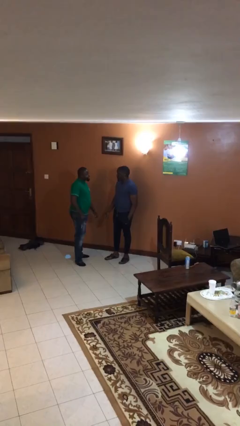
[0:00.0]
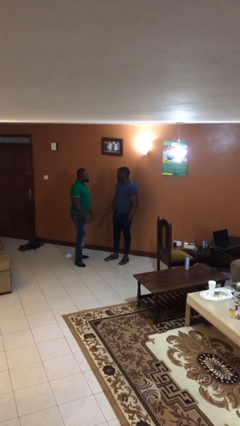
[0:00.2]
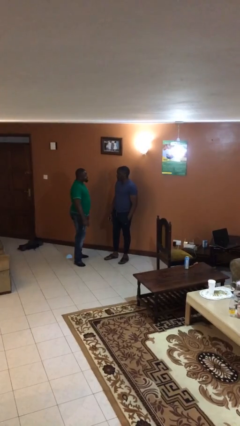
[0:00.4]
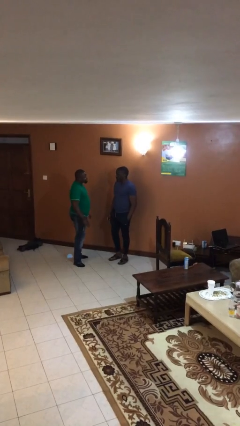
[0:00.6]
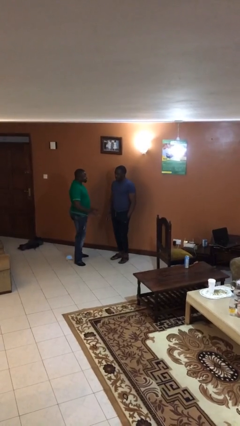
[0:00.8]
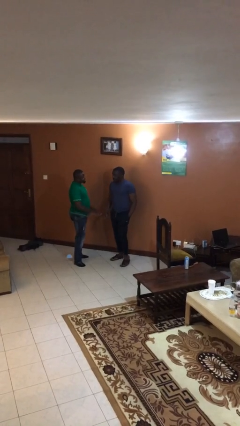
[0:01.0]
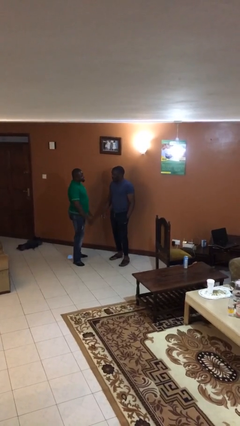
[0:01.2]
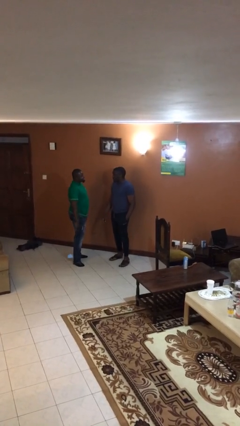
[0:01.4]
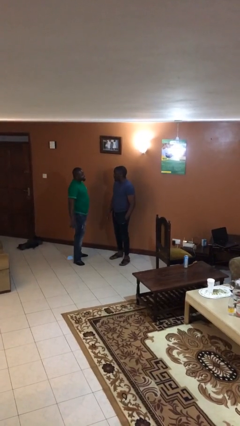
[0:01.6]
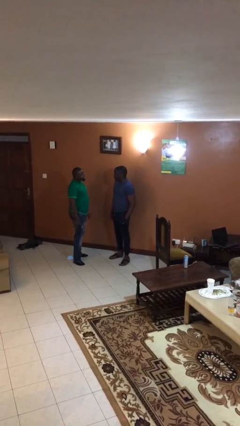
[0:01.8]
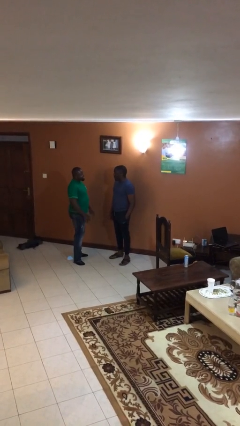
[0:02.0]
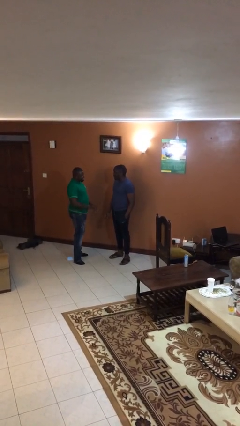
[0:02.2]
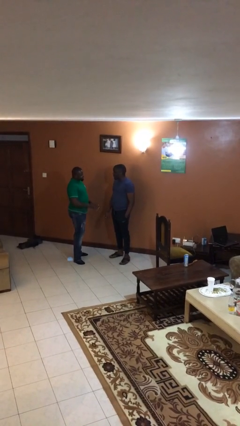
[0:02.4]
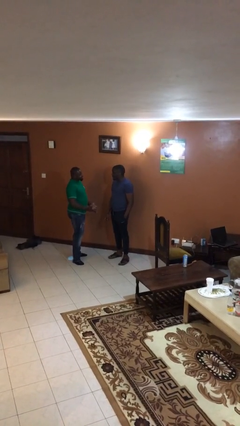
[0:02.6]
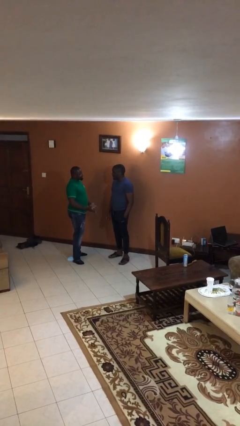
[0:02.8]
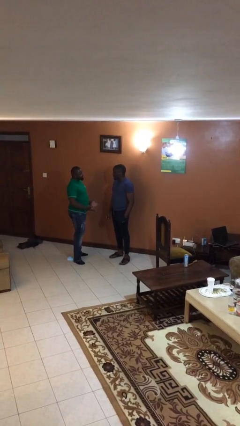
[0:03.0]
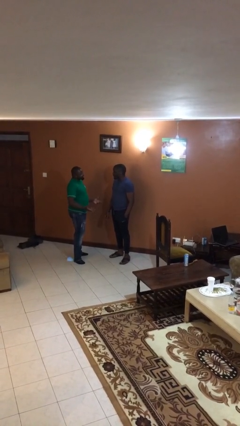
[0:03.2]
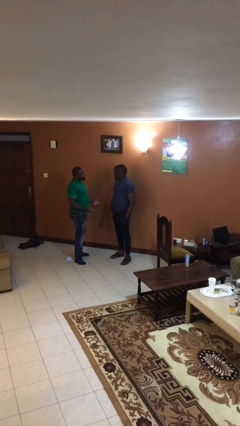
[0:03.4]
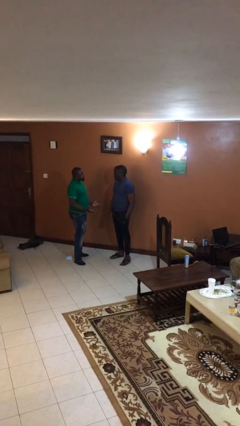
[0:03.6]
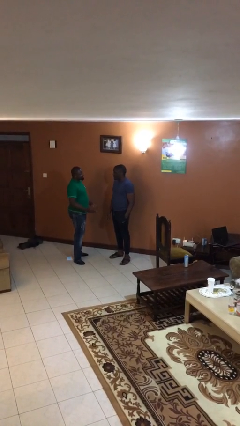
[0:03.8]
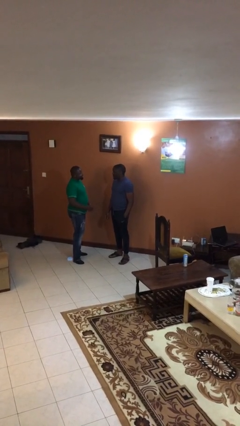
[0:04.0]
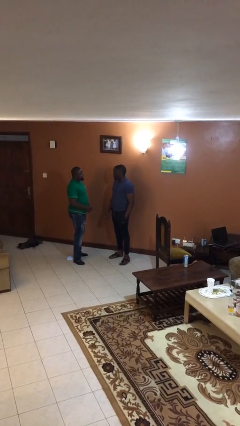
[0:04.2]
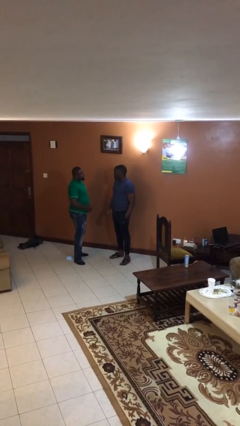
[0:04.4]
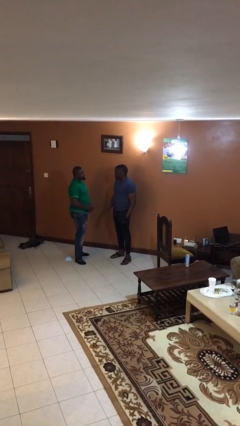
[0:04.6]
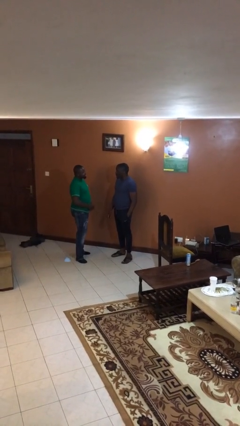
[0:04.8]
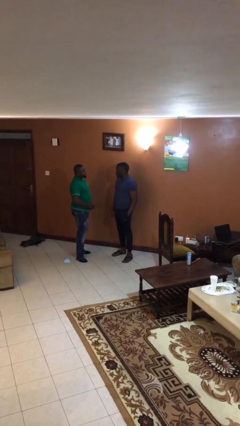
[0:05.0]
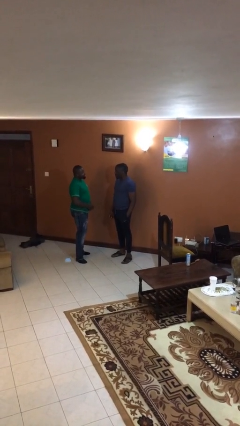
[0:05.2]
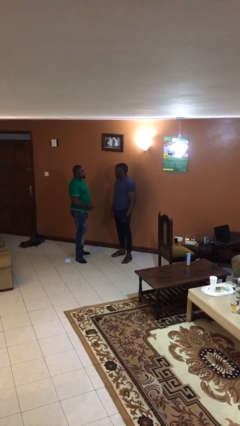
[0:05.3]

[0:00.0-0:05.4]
person talks to person

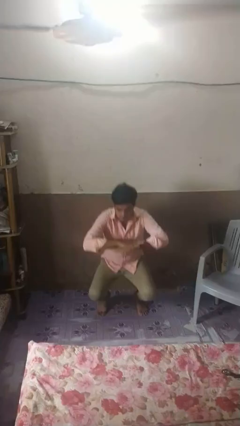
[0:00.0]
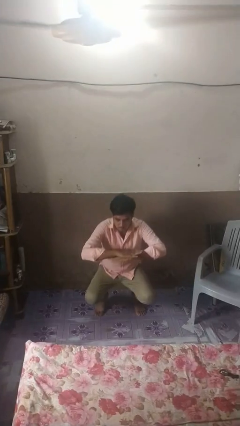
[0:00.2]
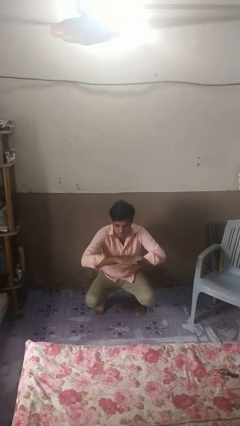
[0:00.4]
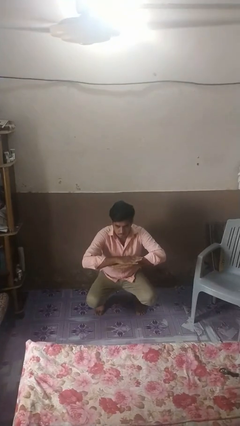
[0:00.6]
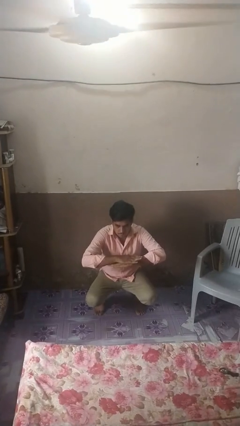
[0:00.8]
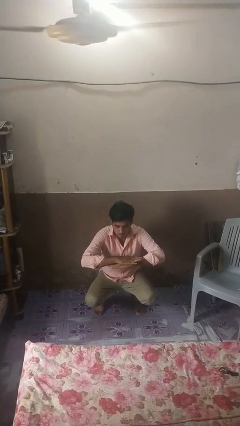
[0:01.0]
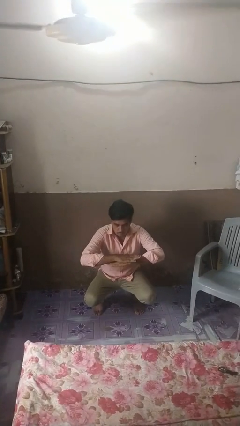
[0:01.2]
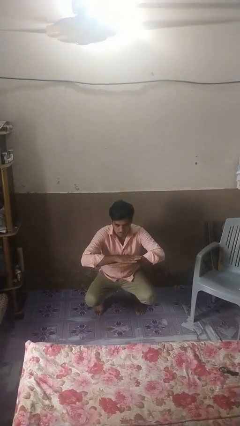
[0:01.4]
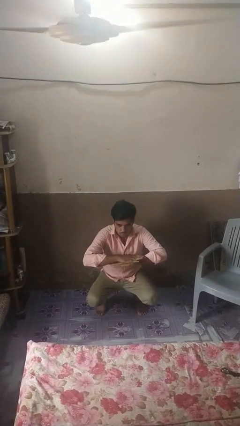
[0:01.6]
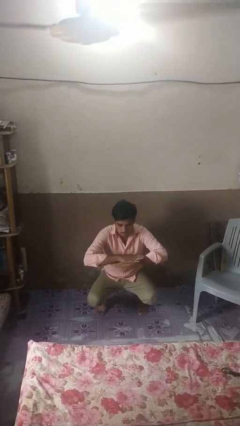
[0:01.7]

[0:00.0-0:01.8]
person stands up

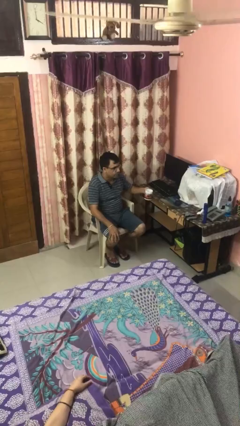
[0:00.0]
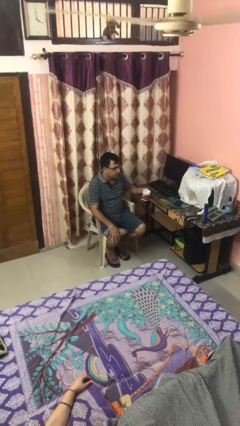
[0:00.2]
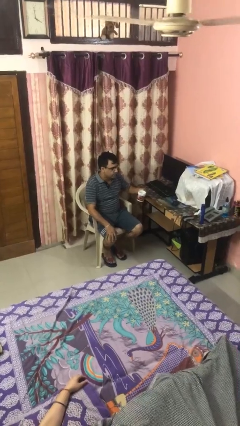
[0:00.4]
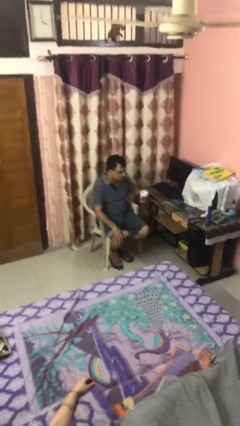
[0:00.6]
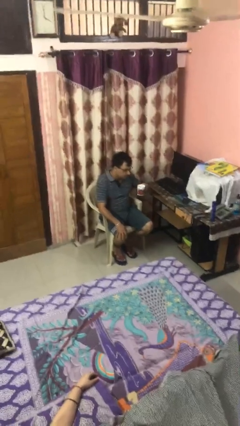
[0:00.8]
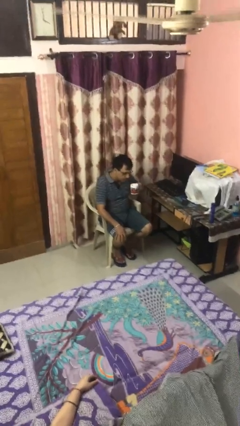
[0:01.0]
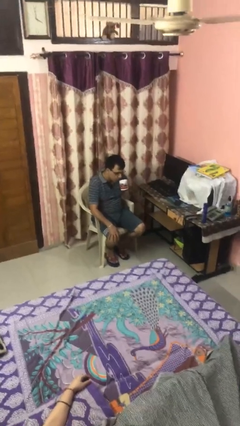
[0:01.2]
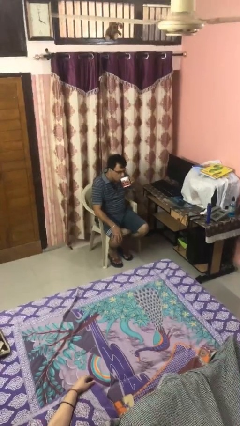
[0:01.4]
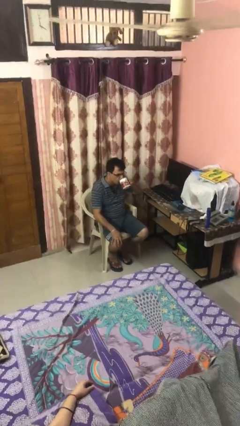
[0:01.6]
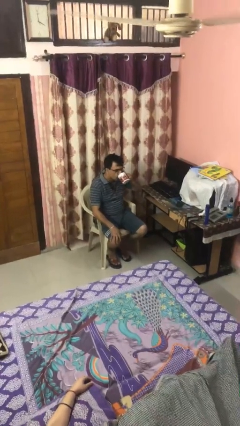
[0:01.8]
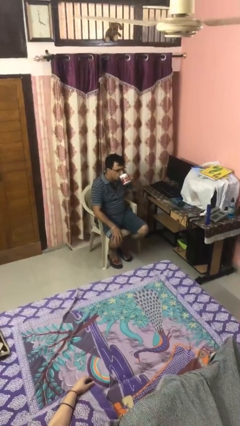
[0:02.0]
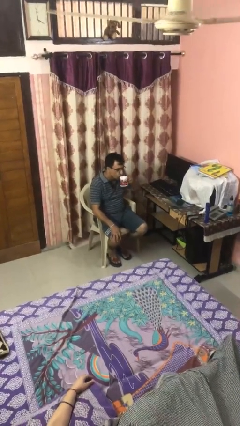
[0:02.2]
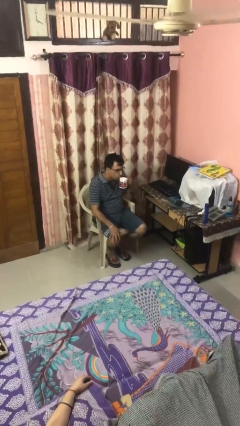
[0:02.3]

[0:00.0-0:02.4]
person drinks from mug

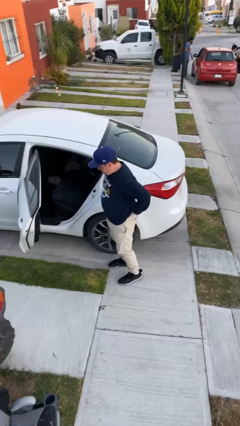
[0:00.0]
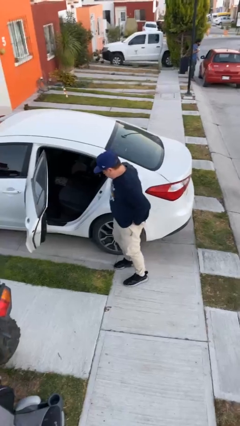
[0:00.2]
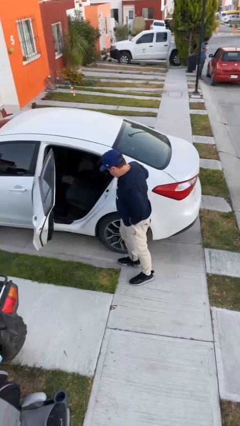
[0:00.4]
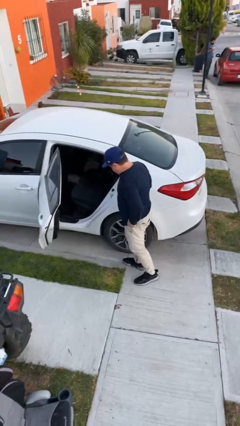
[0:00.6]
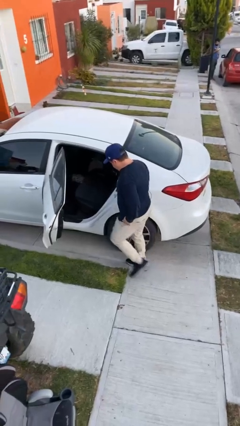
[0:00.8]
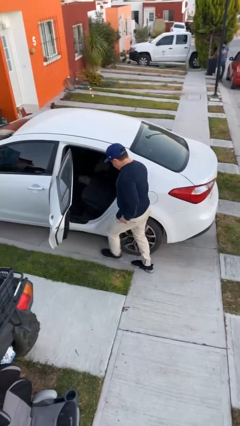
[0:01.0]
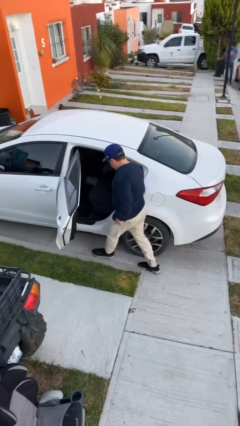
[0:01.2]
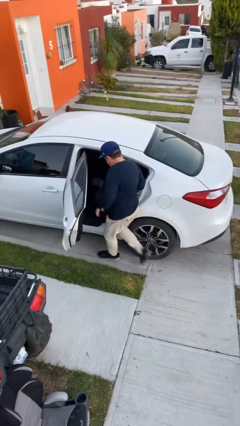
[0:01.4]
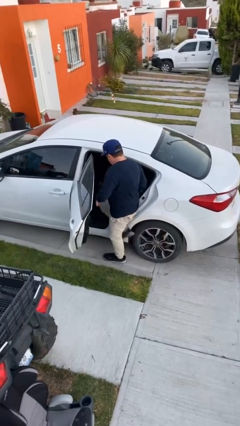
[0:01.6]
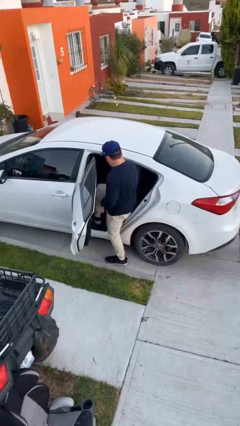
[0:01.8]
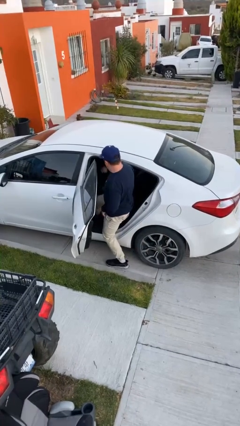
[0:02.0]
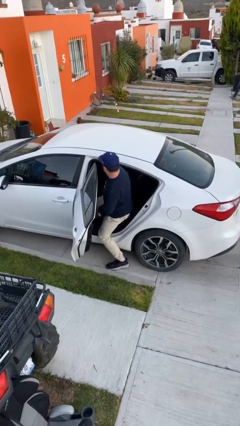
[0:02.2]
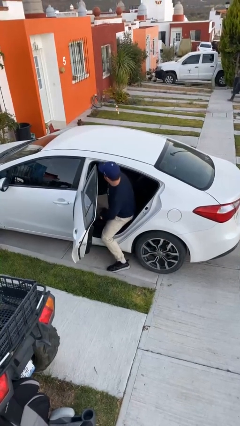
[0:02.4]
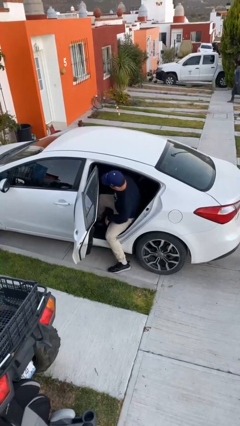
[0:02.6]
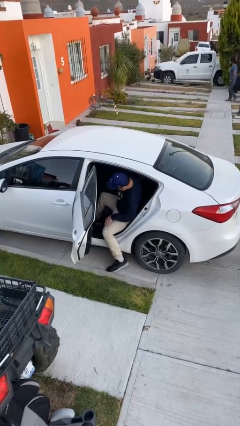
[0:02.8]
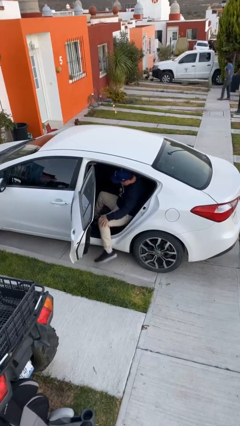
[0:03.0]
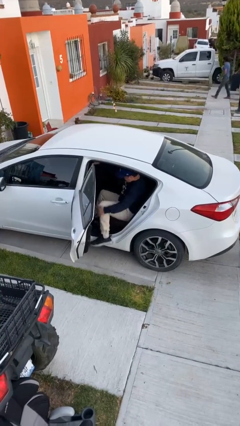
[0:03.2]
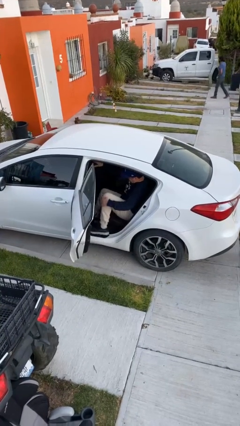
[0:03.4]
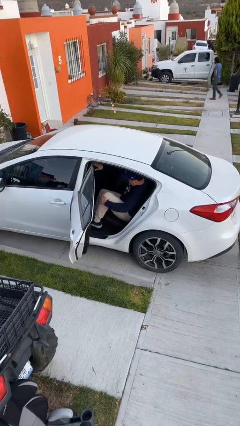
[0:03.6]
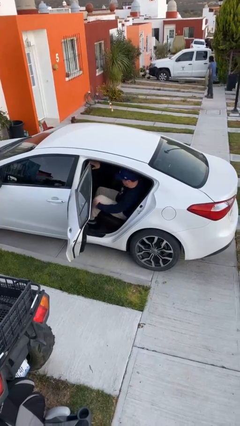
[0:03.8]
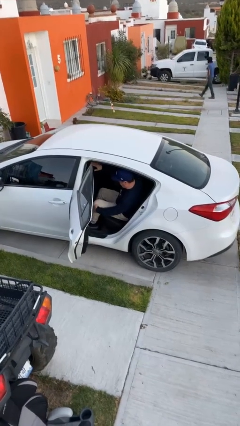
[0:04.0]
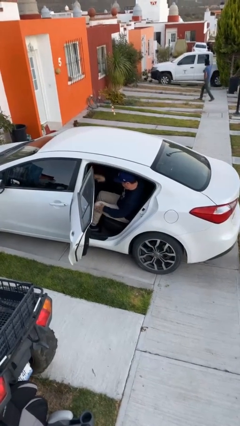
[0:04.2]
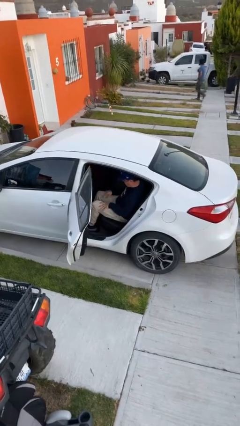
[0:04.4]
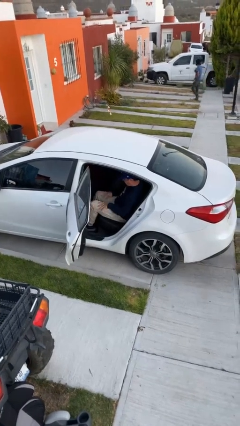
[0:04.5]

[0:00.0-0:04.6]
person enters car

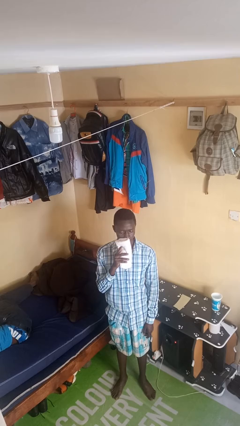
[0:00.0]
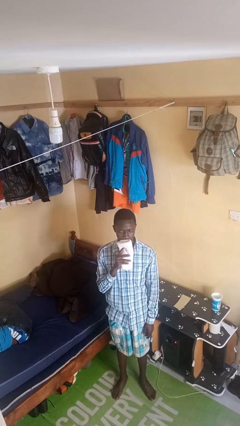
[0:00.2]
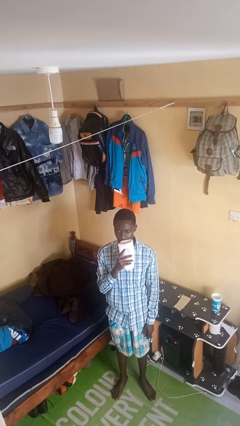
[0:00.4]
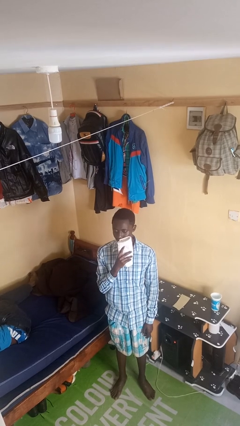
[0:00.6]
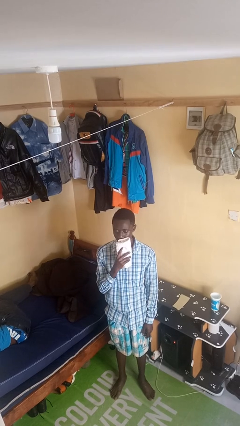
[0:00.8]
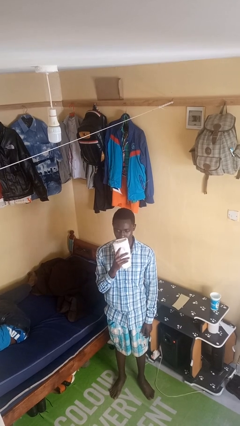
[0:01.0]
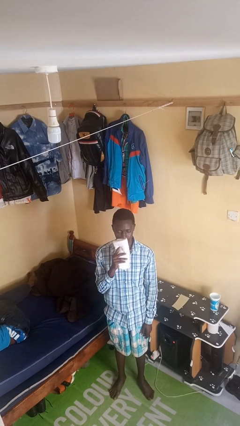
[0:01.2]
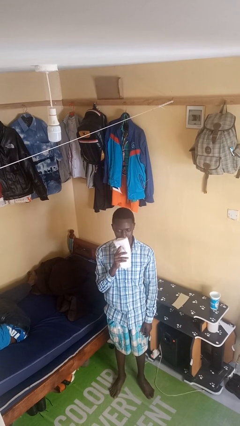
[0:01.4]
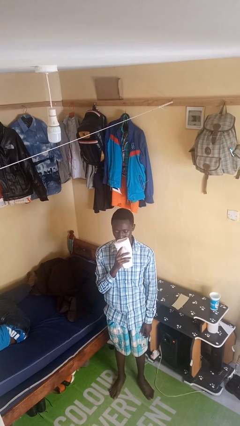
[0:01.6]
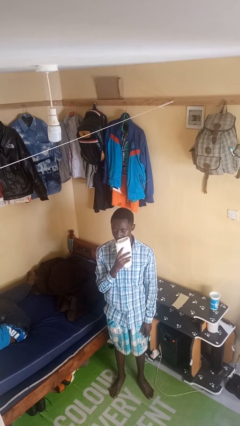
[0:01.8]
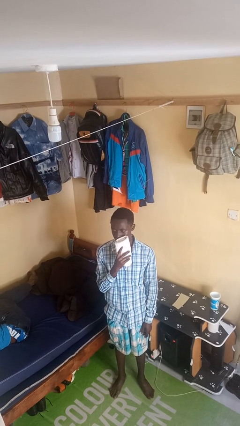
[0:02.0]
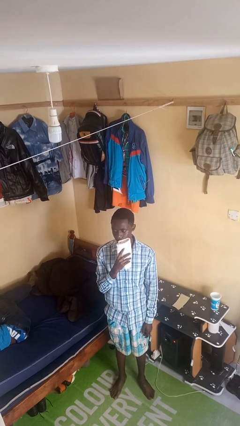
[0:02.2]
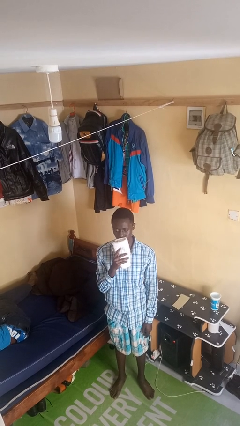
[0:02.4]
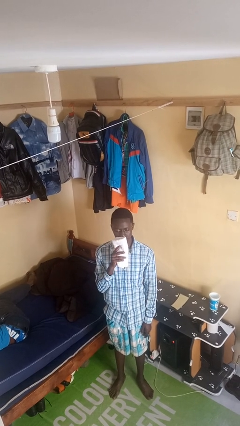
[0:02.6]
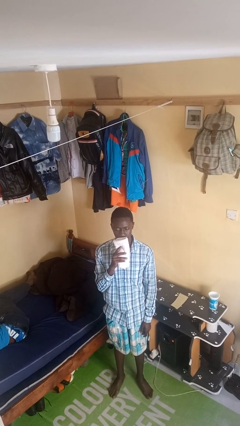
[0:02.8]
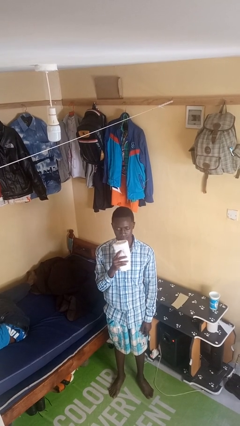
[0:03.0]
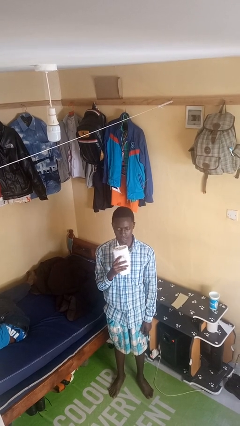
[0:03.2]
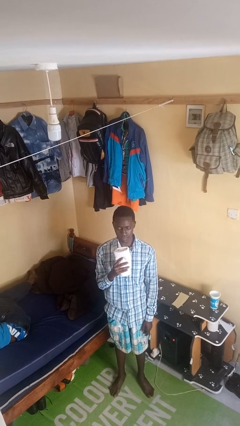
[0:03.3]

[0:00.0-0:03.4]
person wipes mouth with napkin

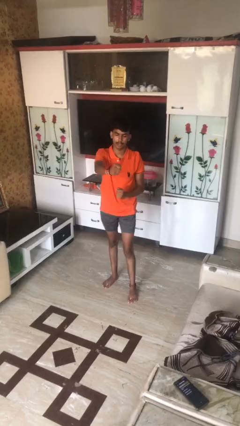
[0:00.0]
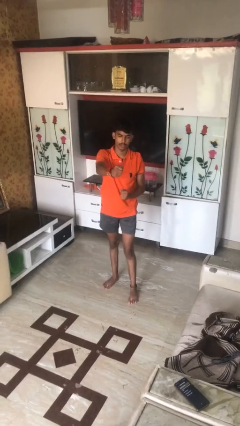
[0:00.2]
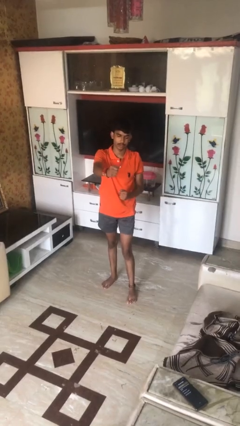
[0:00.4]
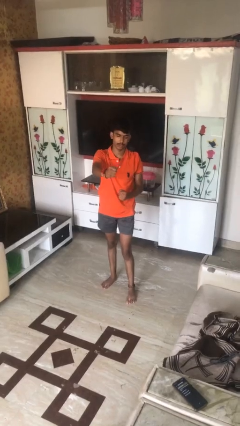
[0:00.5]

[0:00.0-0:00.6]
person punches
